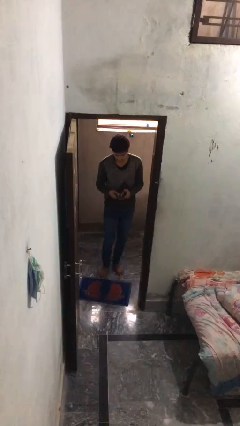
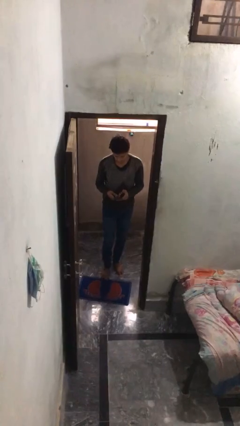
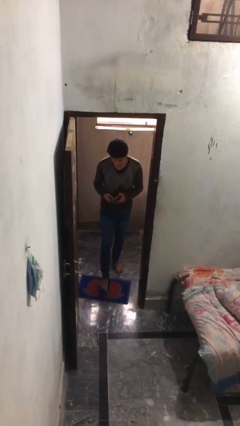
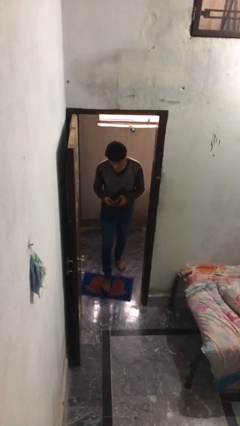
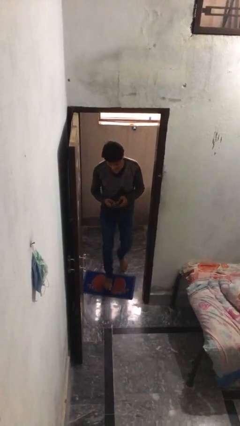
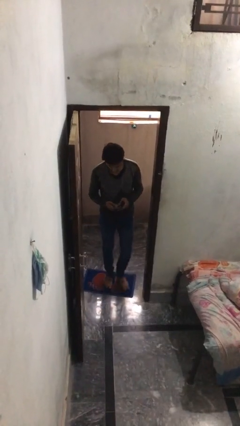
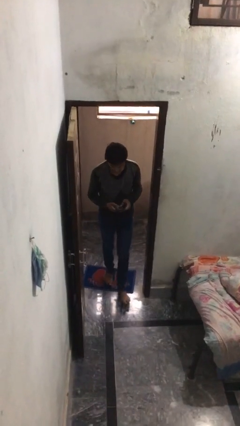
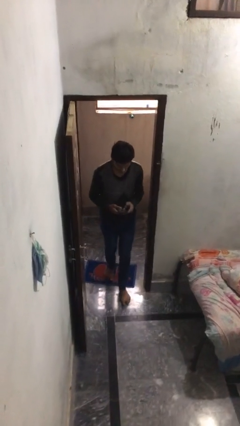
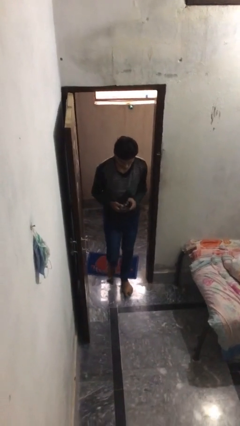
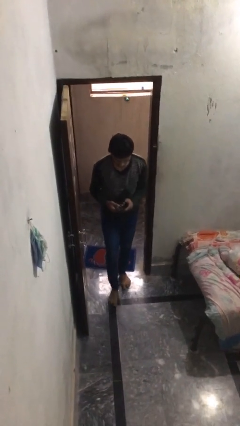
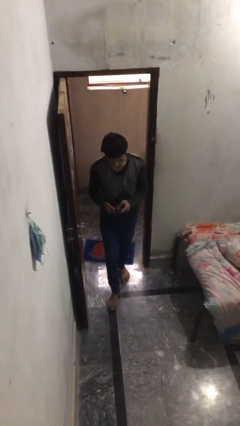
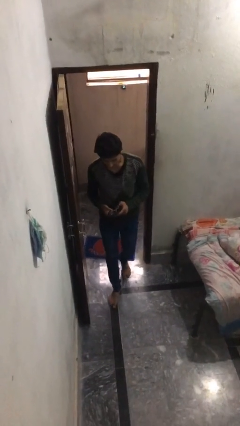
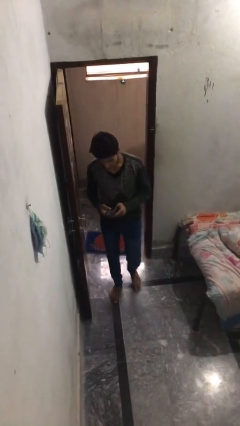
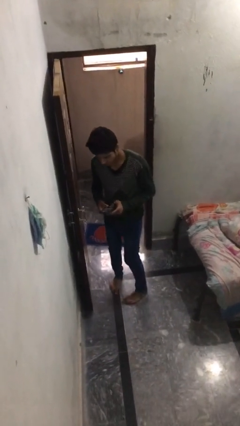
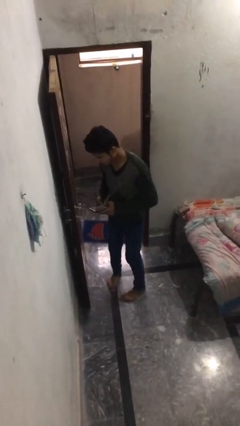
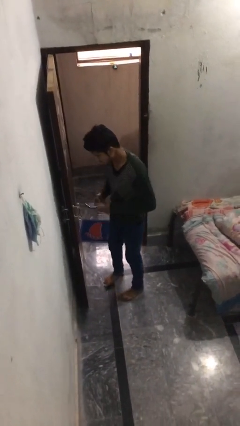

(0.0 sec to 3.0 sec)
person enters scene through structure

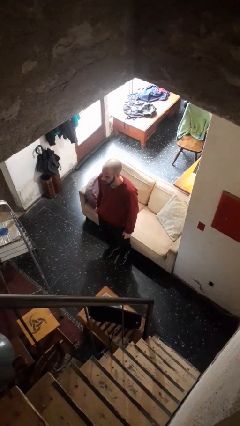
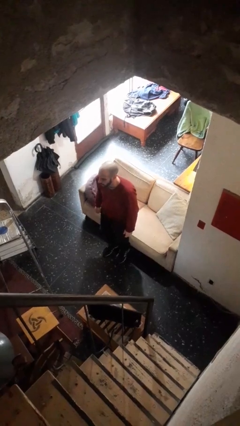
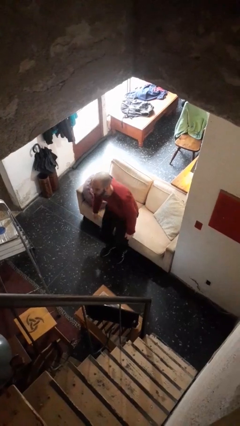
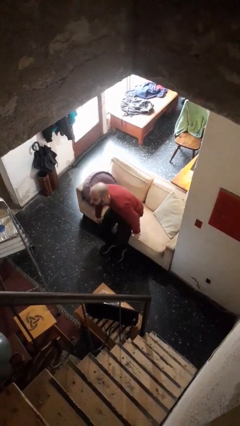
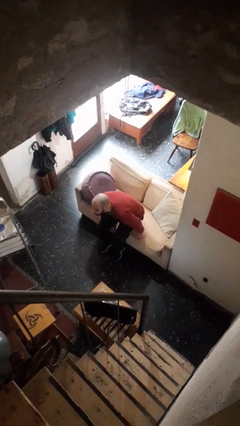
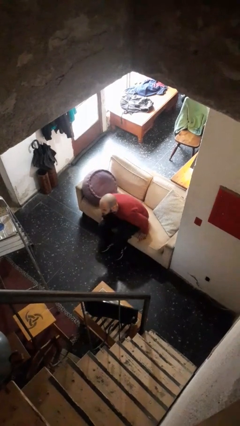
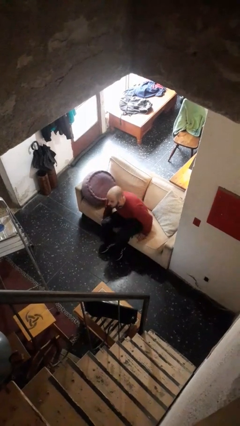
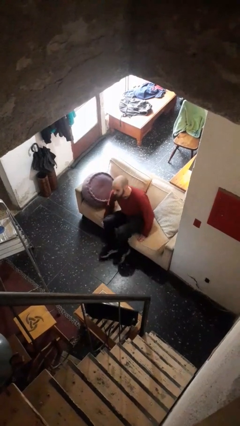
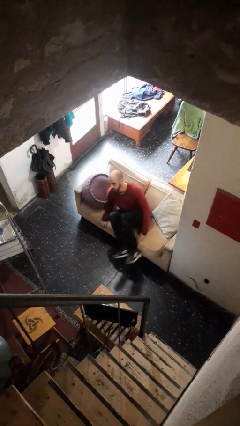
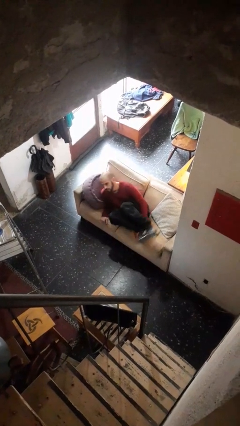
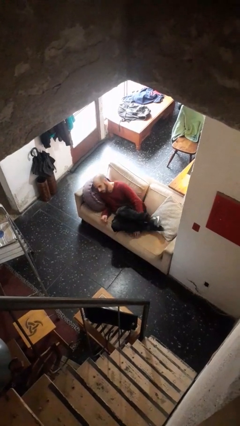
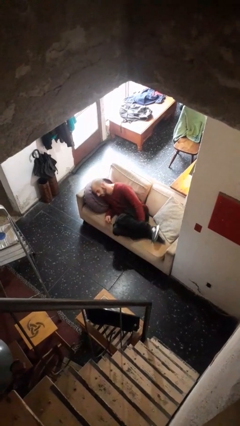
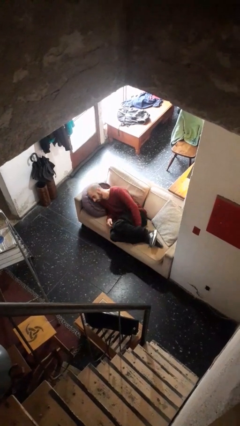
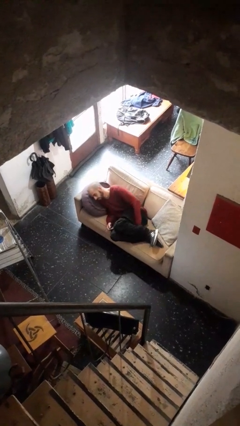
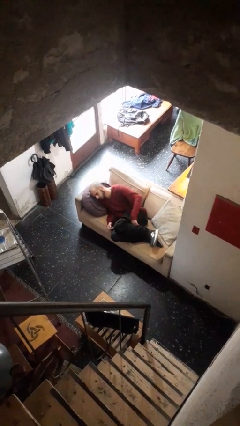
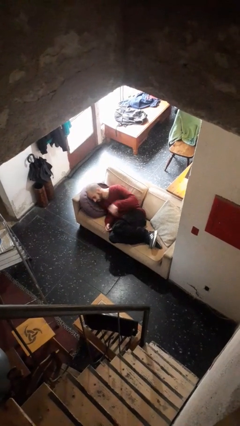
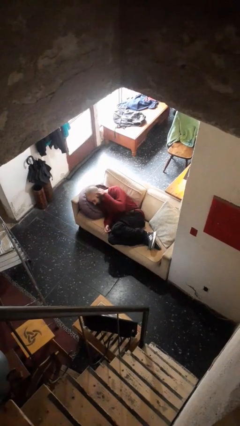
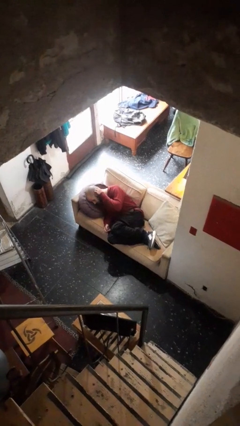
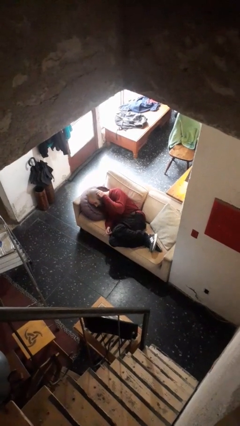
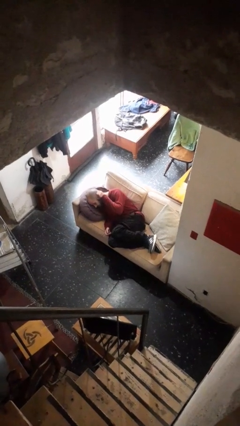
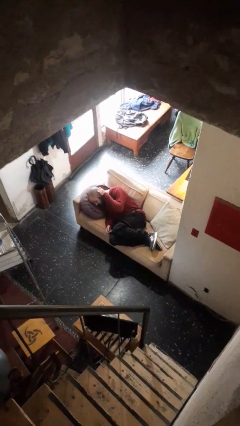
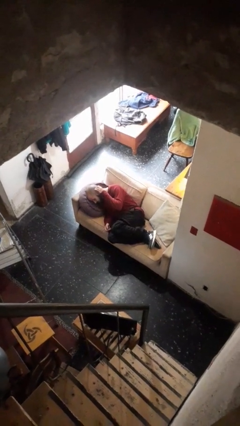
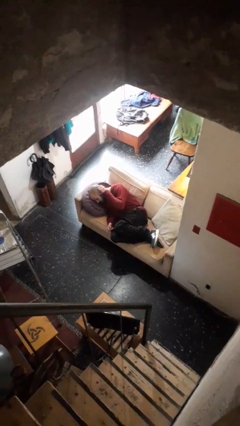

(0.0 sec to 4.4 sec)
person lies down on couch

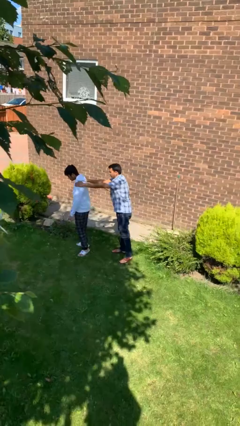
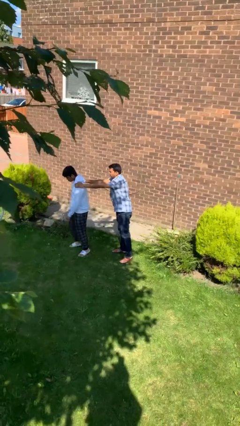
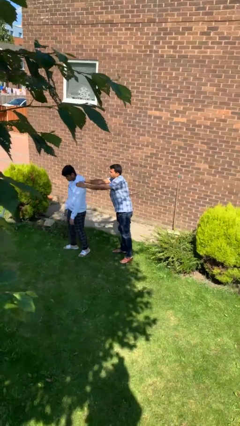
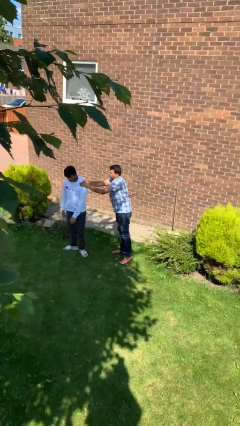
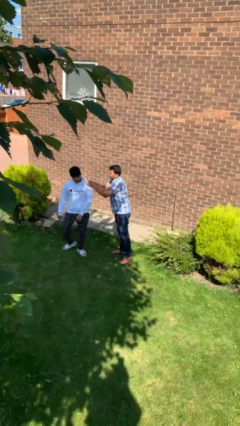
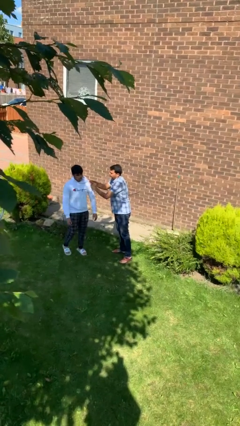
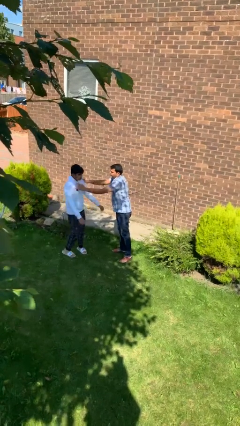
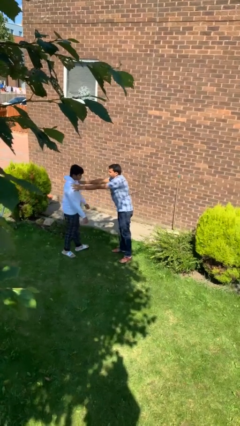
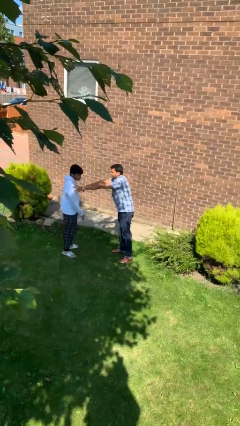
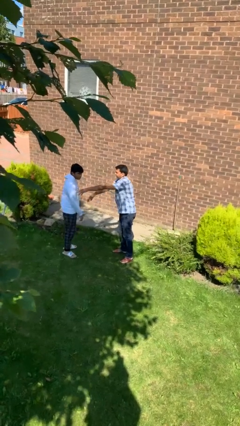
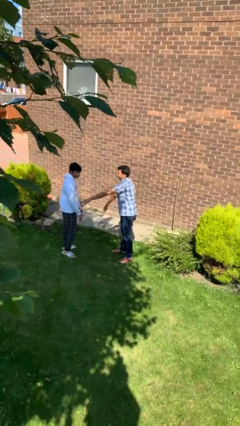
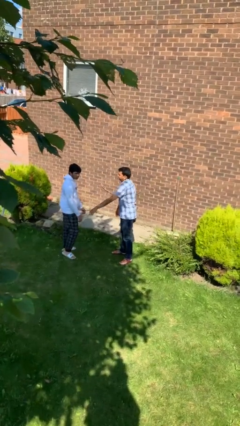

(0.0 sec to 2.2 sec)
person spins person around

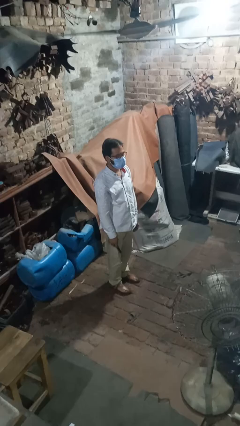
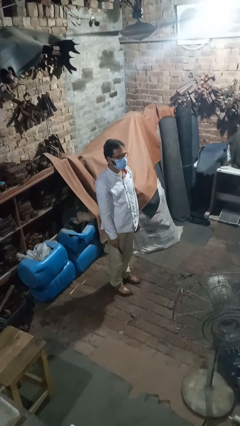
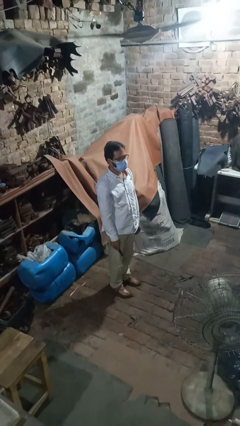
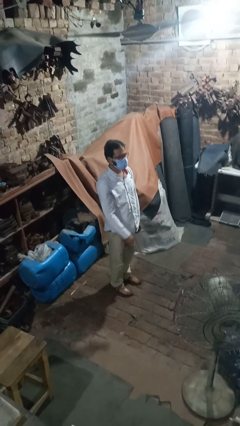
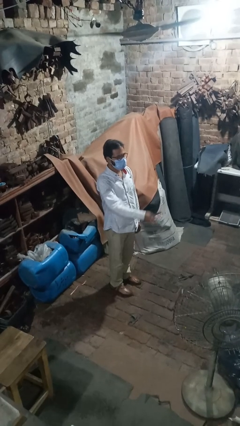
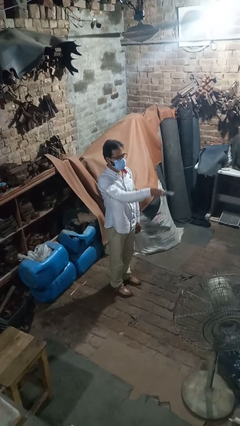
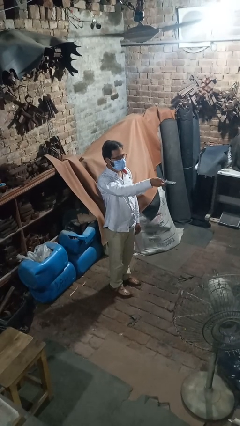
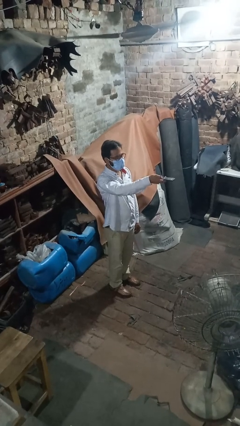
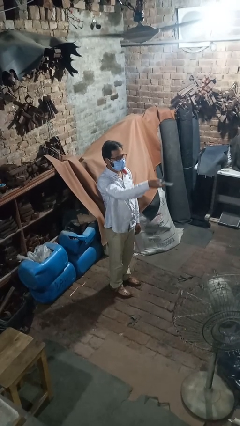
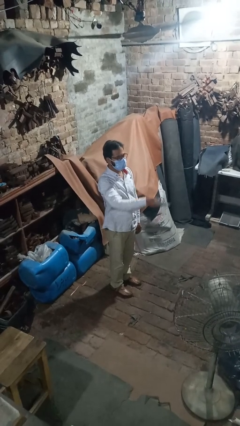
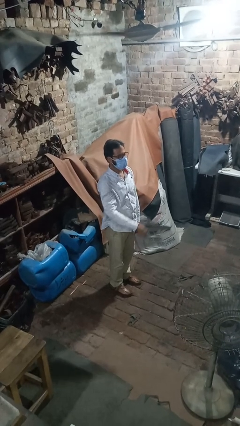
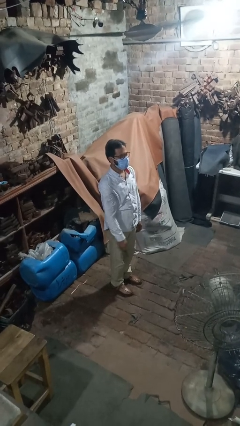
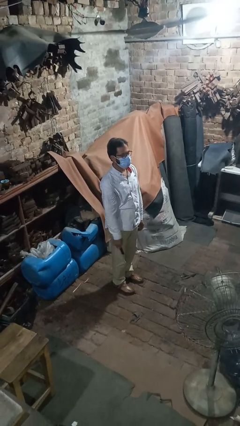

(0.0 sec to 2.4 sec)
person uses television remote

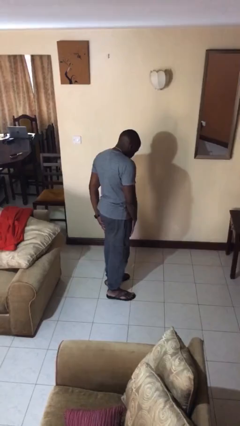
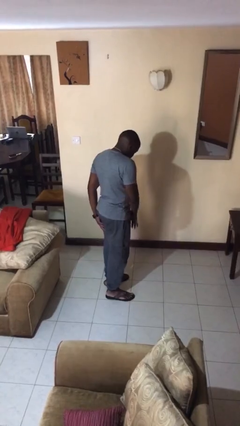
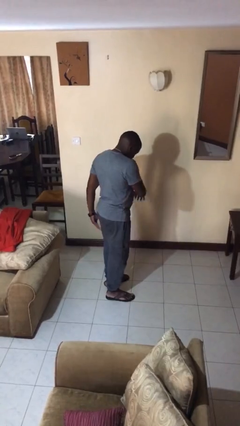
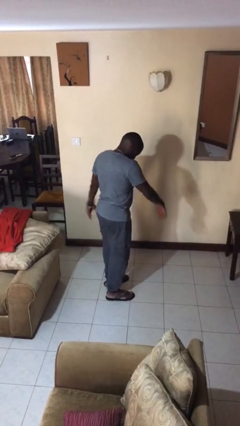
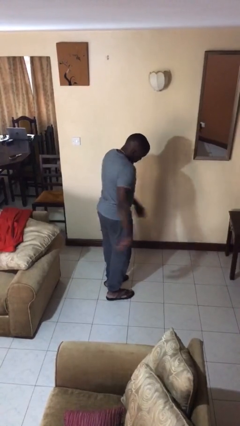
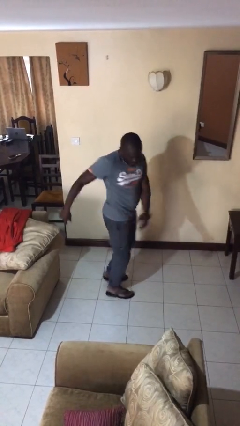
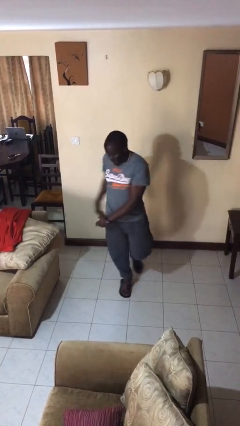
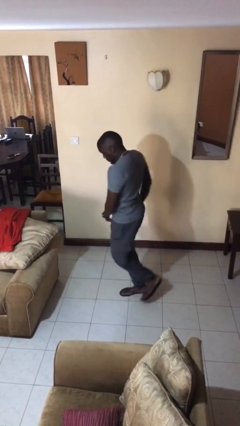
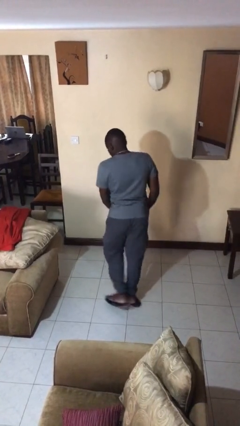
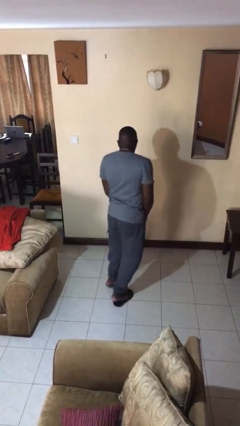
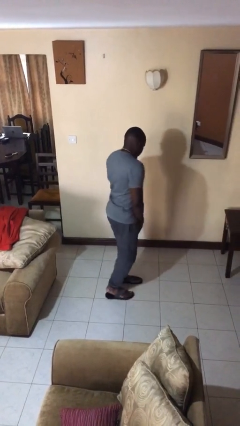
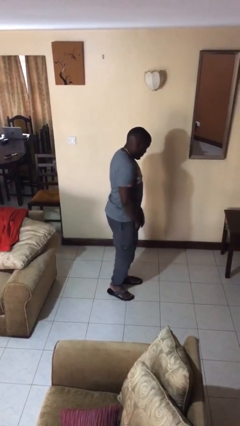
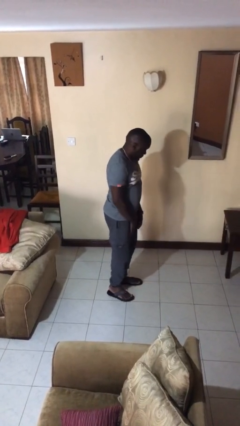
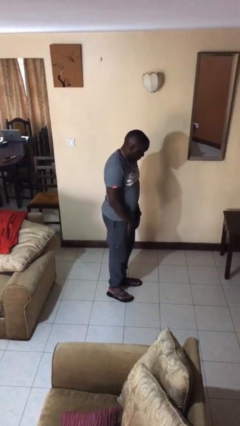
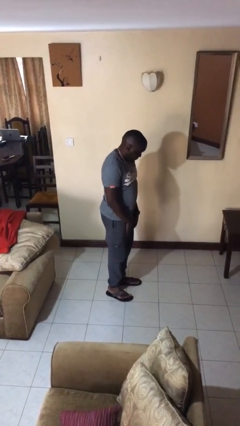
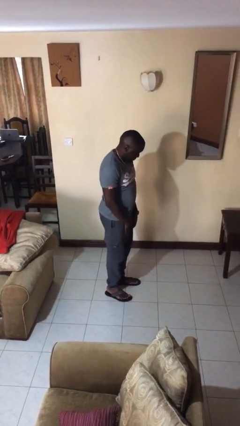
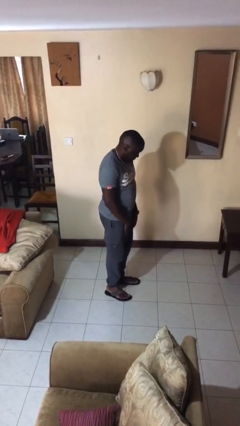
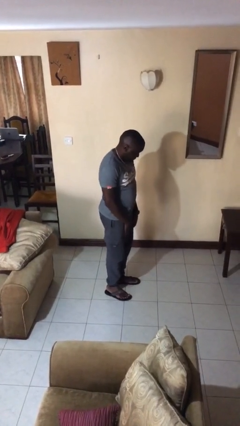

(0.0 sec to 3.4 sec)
person twirls

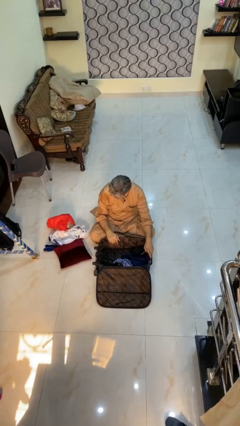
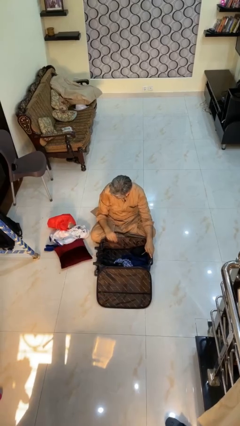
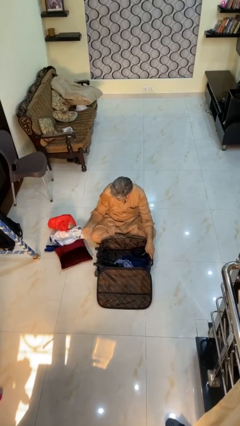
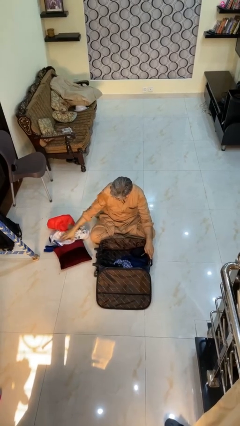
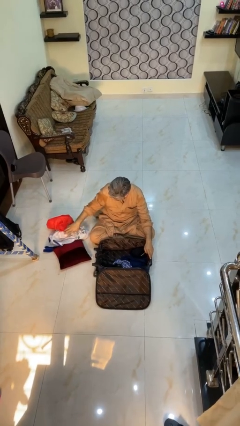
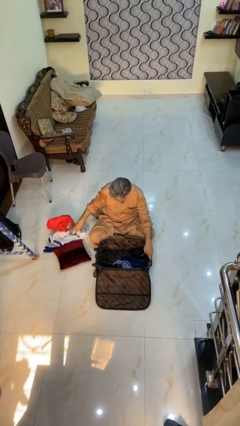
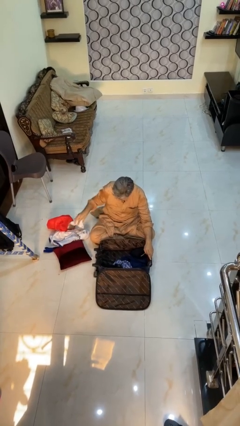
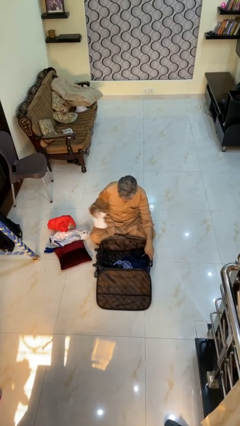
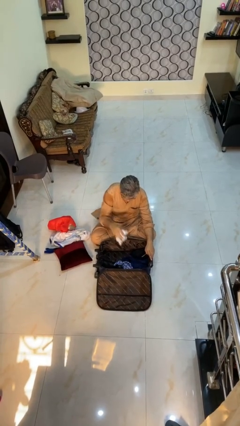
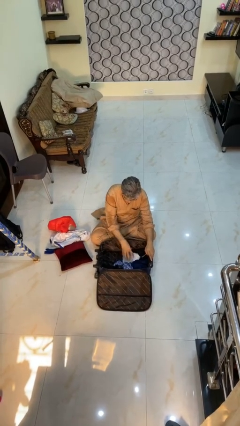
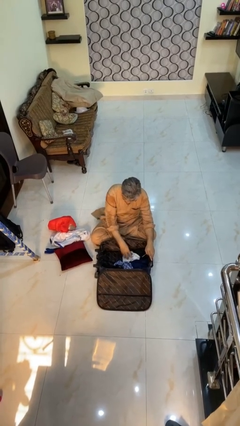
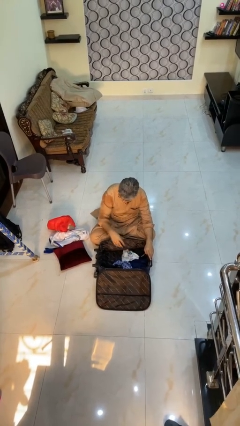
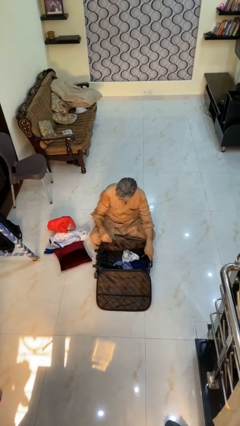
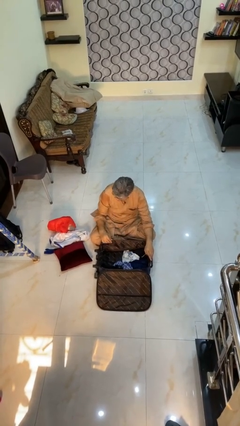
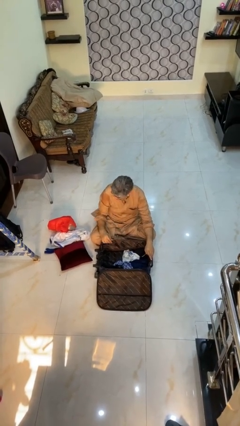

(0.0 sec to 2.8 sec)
person loads clothes into suitcase
